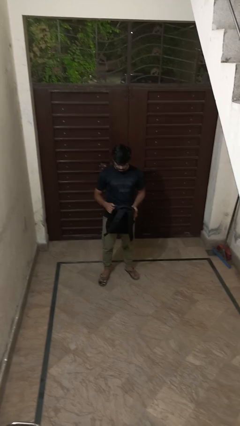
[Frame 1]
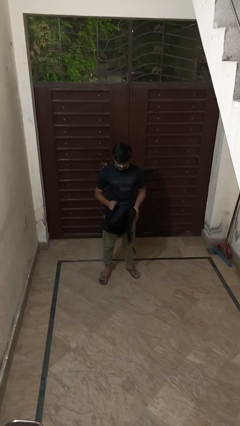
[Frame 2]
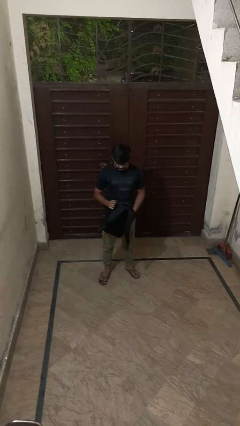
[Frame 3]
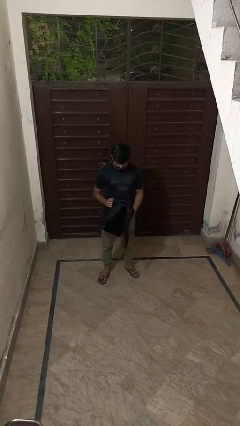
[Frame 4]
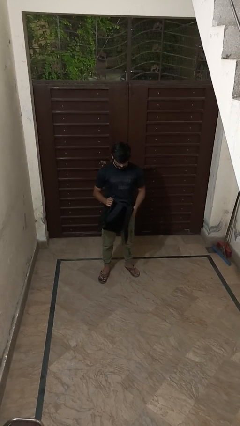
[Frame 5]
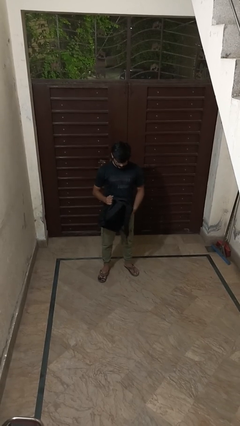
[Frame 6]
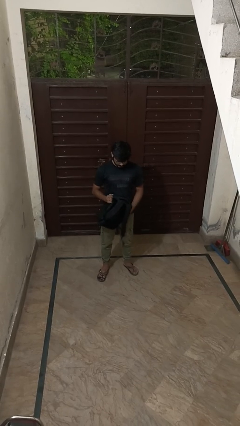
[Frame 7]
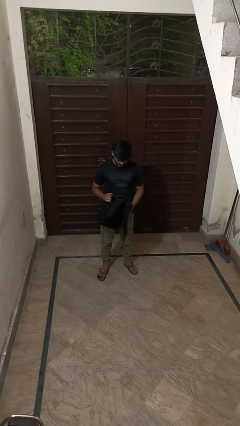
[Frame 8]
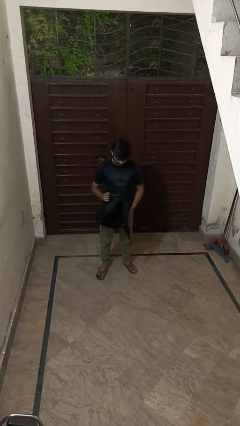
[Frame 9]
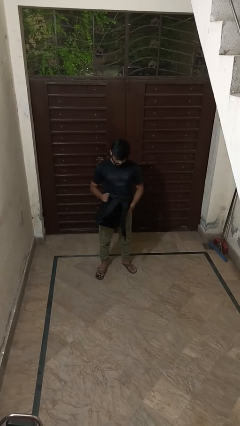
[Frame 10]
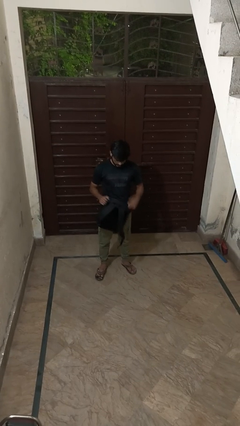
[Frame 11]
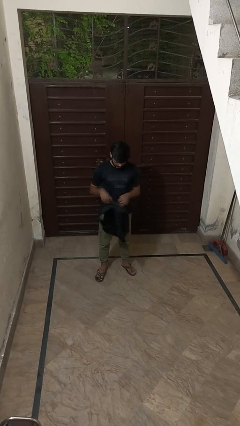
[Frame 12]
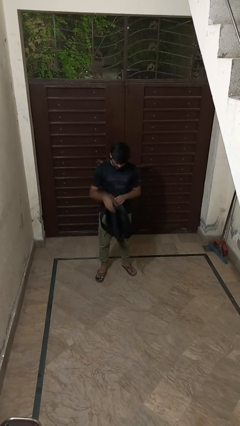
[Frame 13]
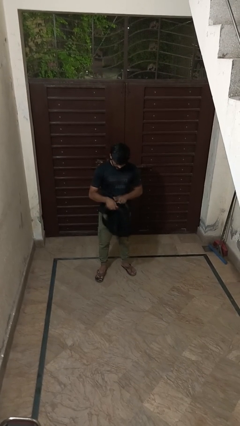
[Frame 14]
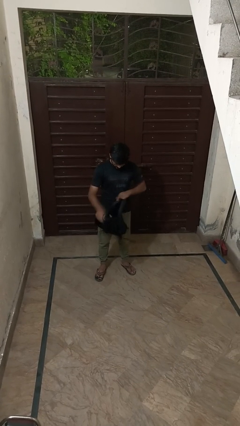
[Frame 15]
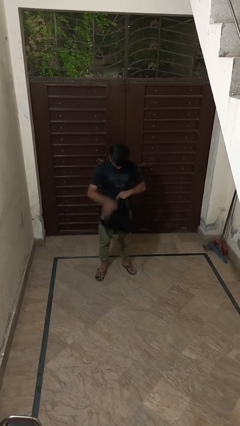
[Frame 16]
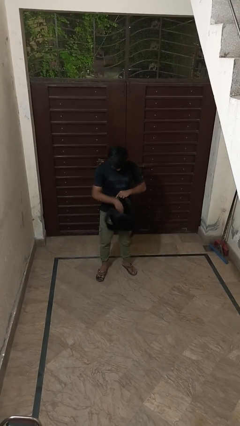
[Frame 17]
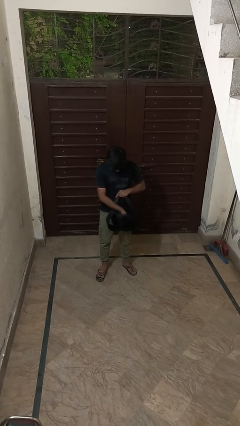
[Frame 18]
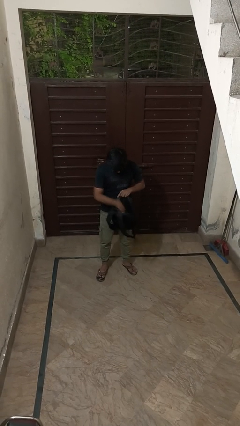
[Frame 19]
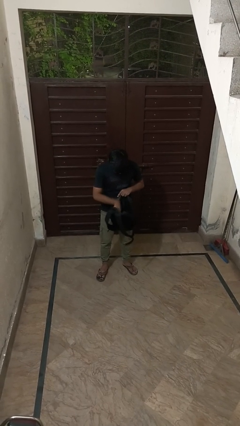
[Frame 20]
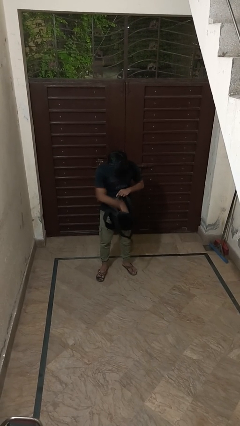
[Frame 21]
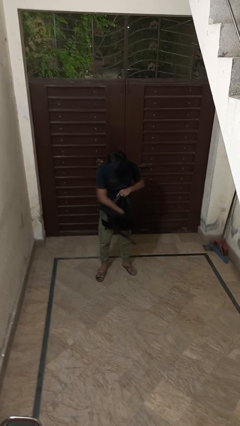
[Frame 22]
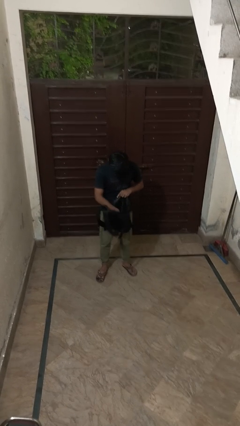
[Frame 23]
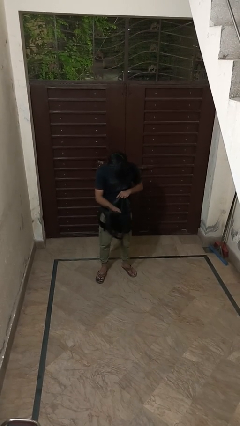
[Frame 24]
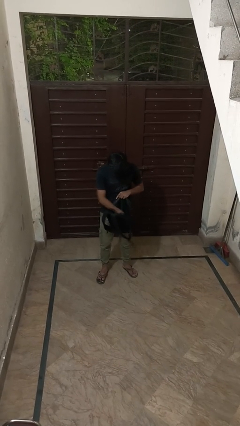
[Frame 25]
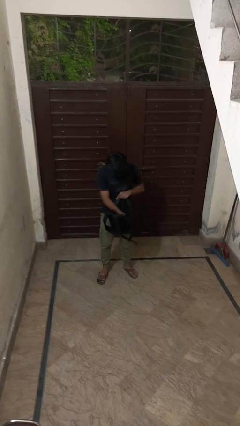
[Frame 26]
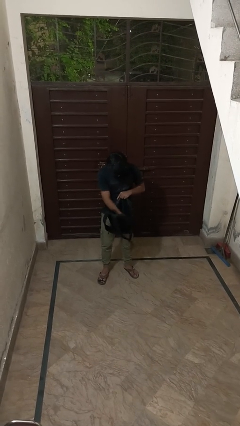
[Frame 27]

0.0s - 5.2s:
person searches in backpack

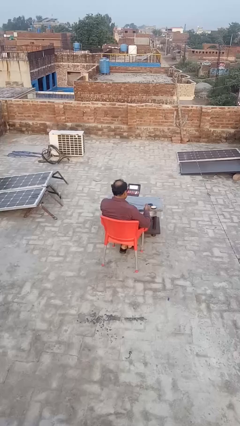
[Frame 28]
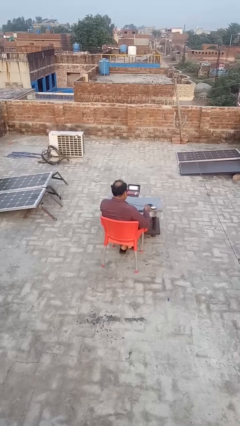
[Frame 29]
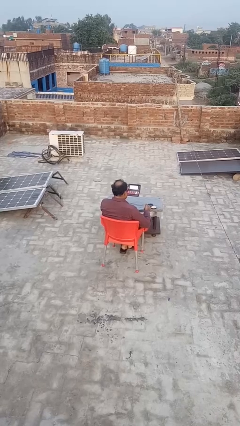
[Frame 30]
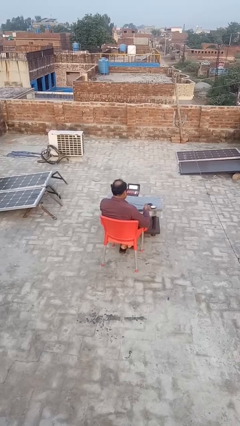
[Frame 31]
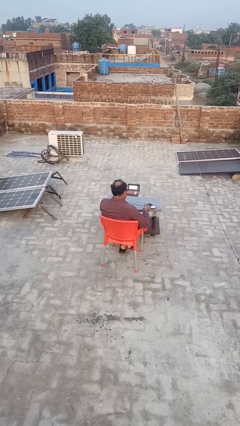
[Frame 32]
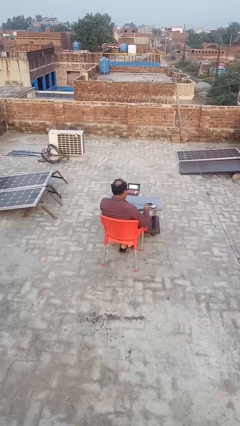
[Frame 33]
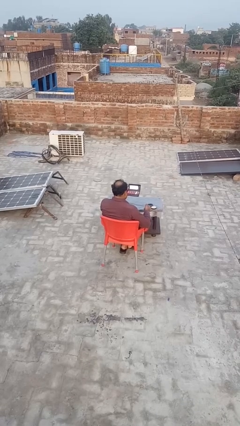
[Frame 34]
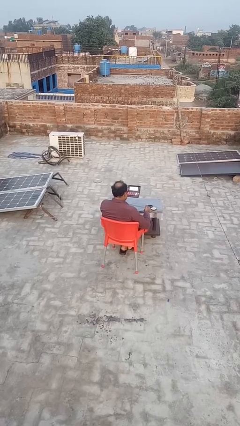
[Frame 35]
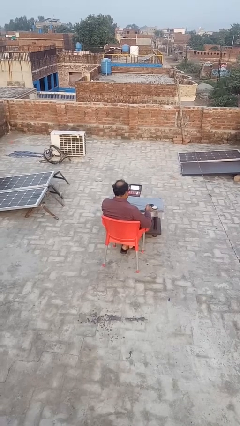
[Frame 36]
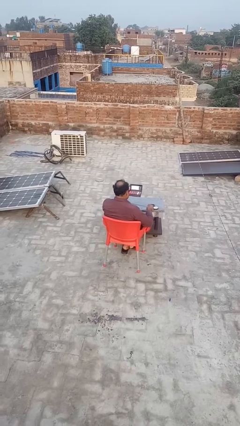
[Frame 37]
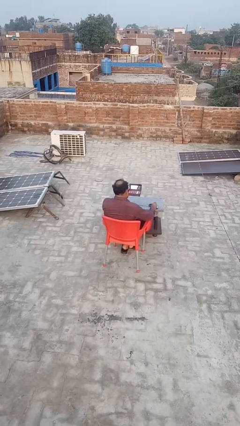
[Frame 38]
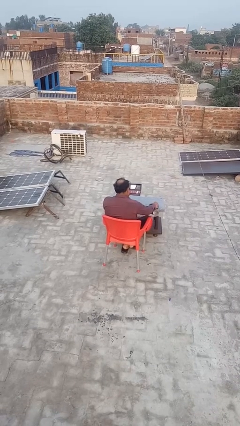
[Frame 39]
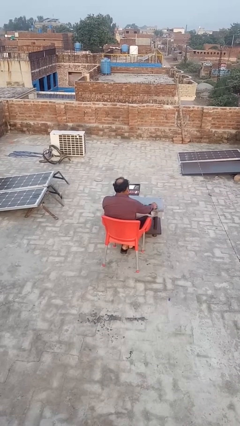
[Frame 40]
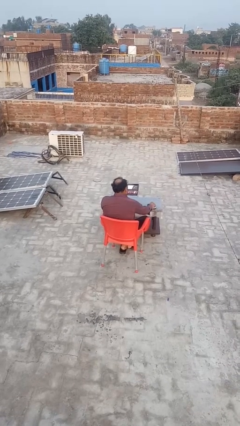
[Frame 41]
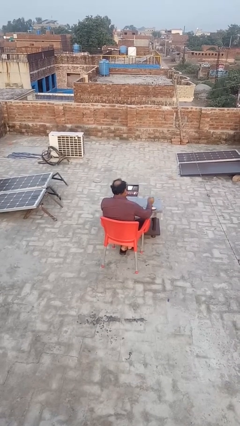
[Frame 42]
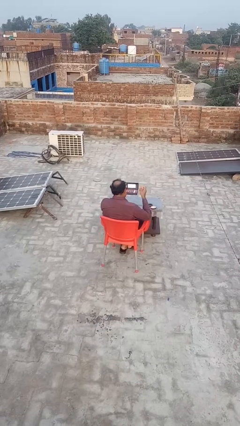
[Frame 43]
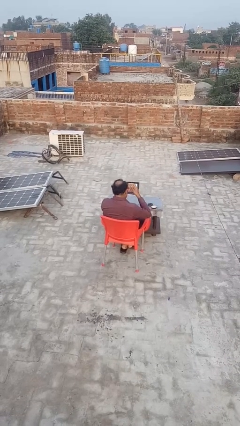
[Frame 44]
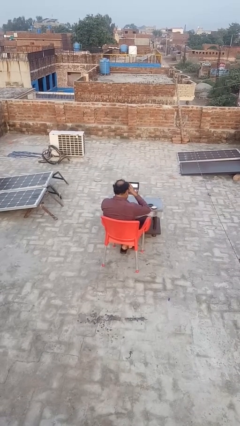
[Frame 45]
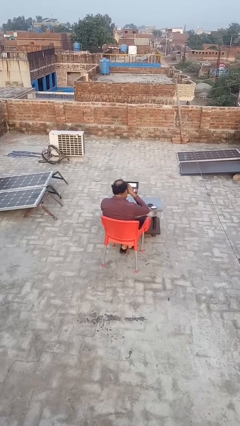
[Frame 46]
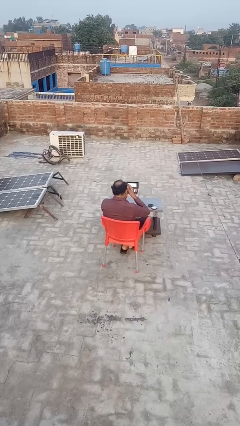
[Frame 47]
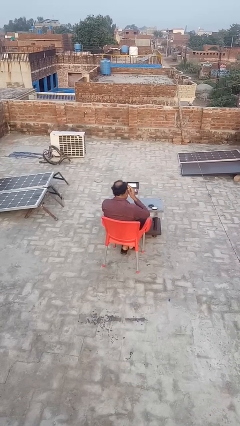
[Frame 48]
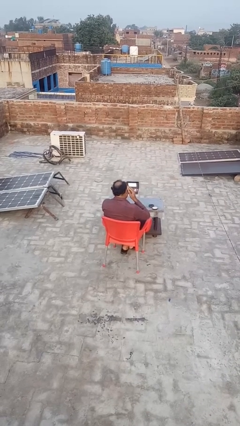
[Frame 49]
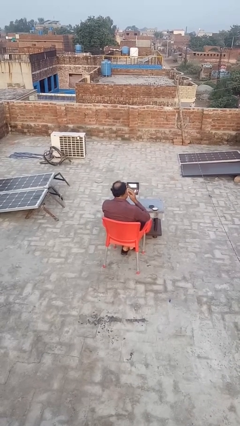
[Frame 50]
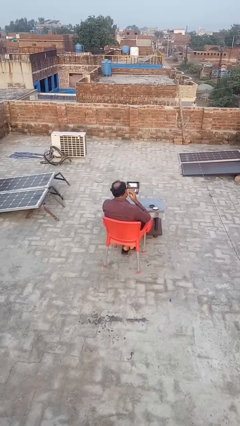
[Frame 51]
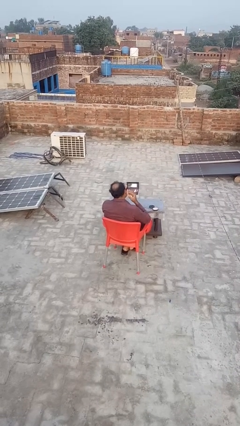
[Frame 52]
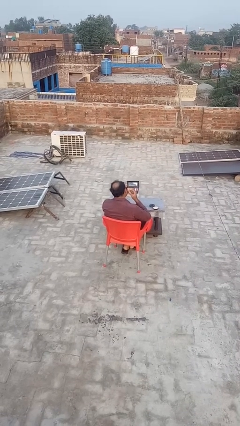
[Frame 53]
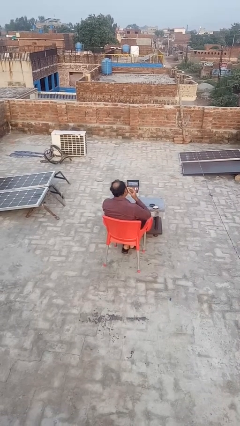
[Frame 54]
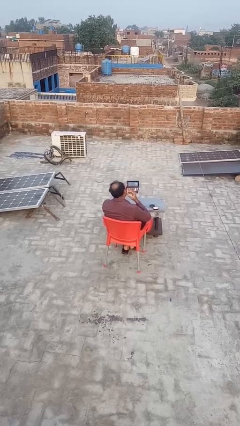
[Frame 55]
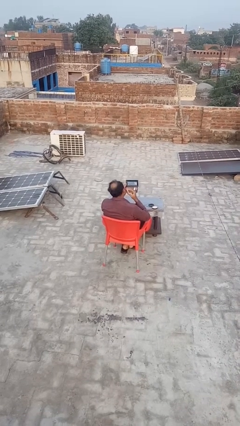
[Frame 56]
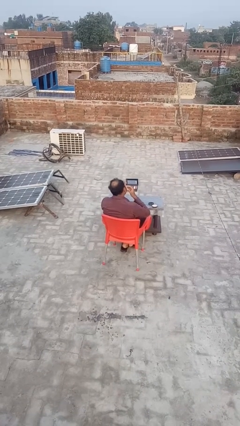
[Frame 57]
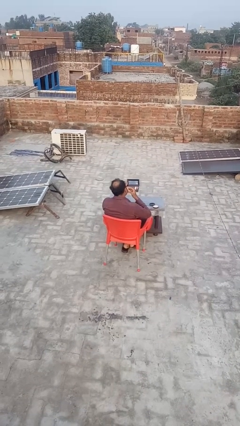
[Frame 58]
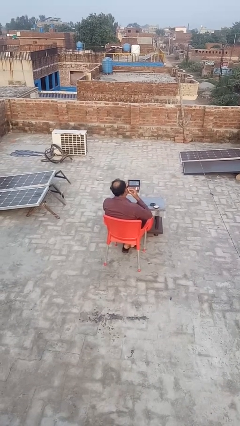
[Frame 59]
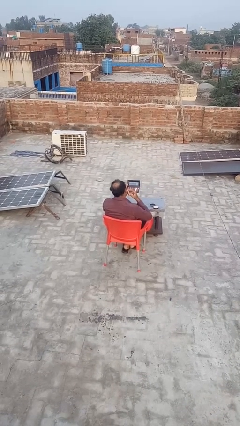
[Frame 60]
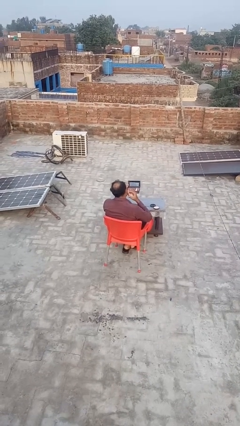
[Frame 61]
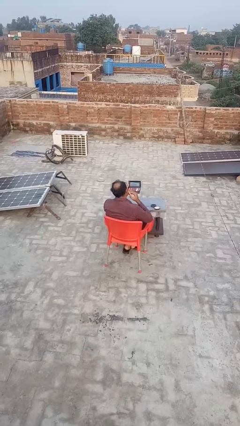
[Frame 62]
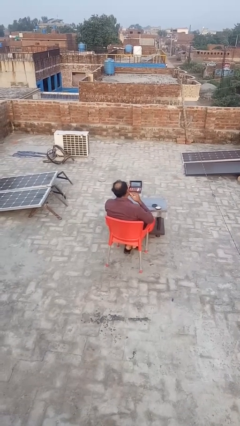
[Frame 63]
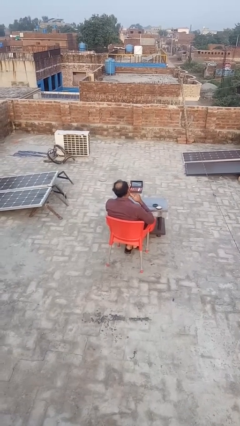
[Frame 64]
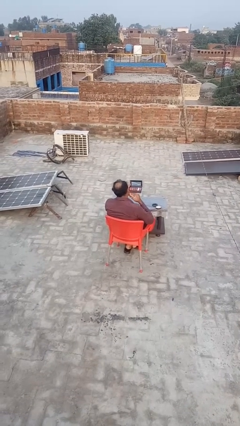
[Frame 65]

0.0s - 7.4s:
person applies foundation makeup

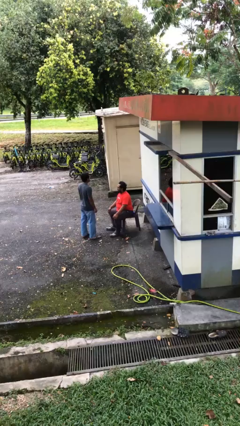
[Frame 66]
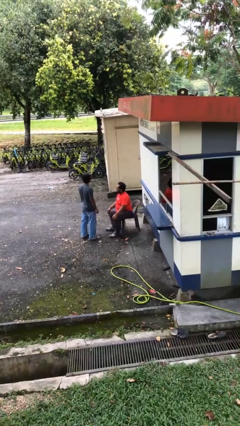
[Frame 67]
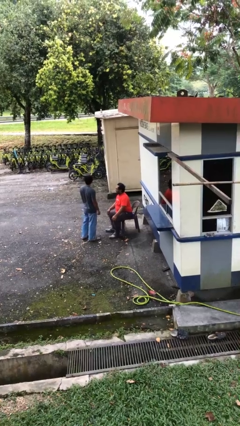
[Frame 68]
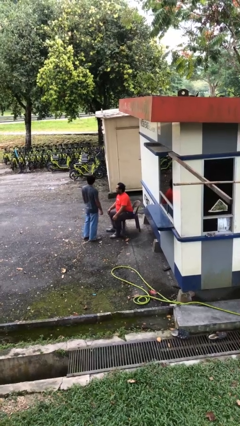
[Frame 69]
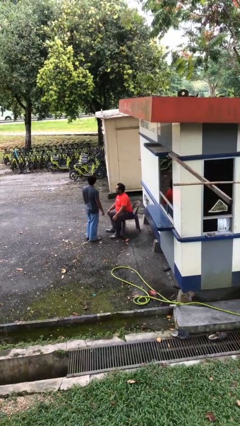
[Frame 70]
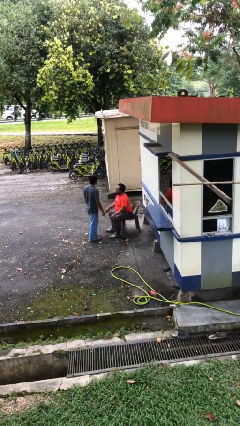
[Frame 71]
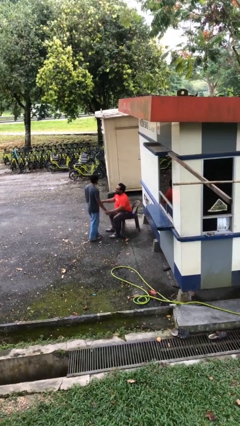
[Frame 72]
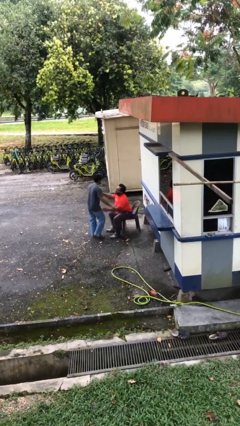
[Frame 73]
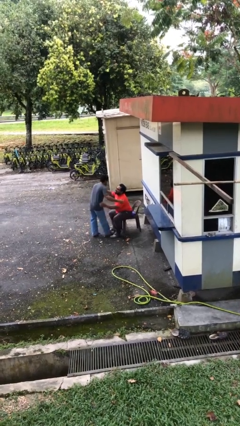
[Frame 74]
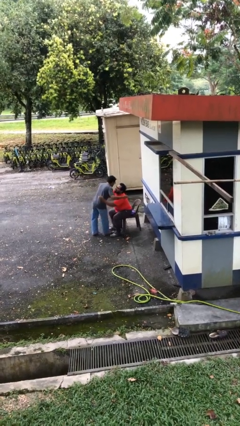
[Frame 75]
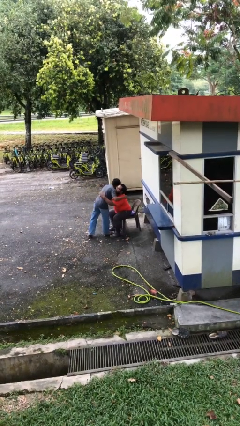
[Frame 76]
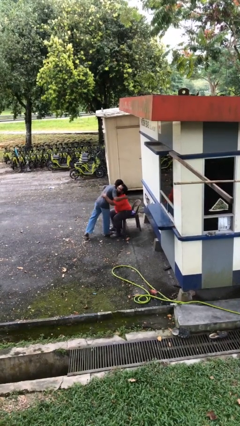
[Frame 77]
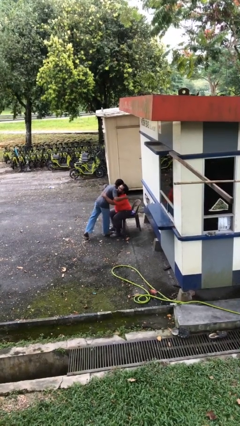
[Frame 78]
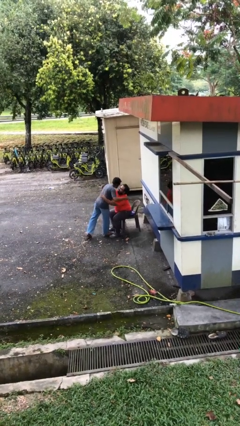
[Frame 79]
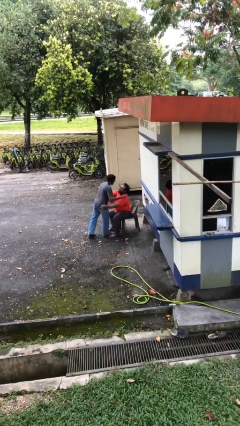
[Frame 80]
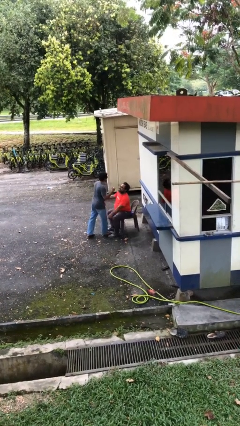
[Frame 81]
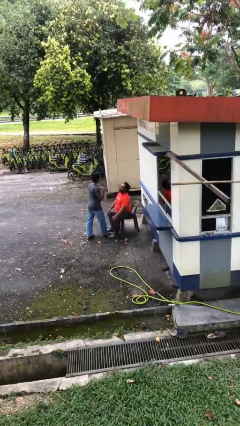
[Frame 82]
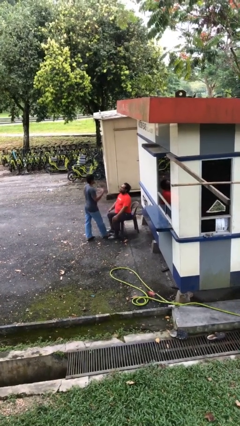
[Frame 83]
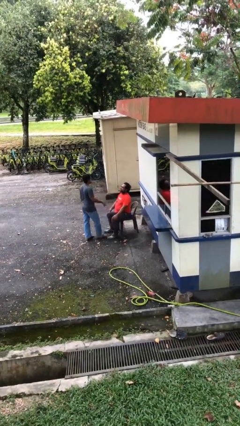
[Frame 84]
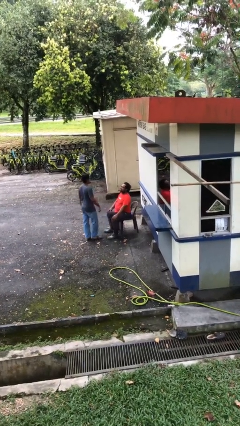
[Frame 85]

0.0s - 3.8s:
person embraces person

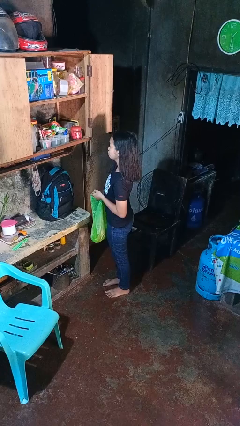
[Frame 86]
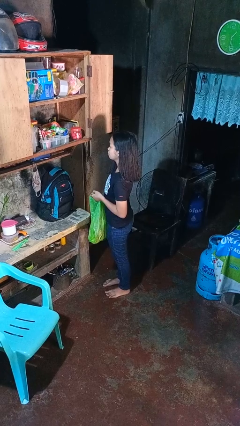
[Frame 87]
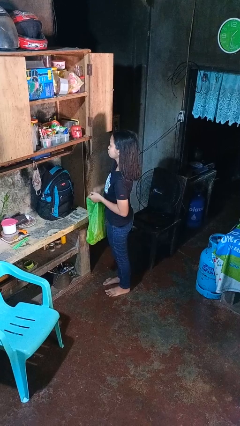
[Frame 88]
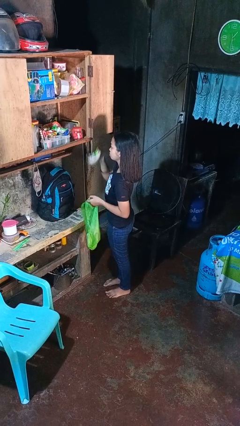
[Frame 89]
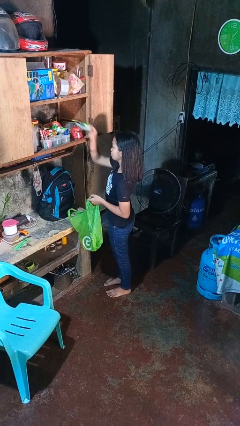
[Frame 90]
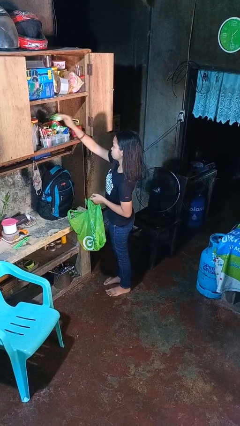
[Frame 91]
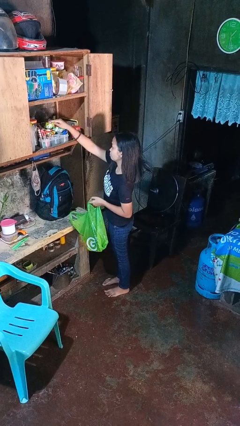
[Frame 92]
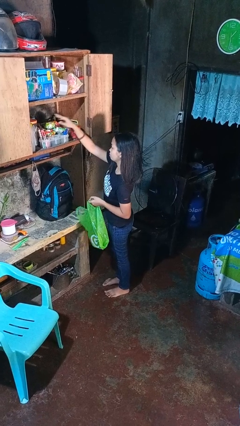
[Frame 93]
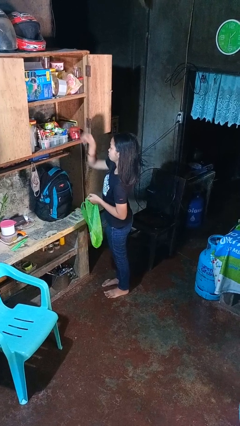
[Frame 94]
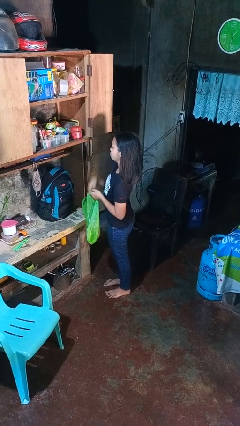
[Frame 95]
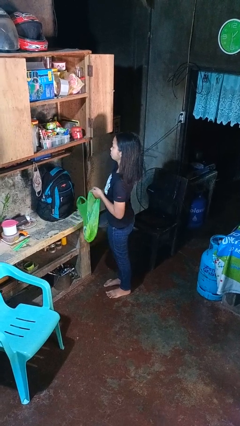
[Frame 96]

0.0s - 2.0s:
person loads groceries into cabinet
